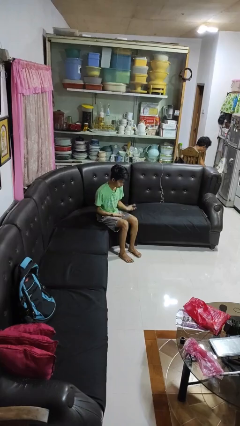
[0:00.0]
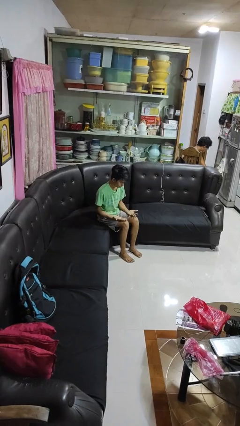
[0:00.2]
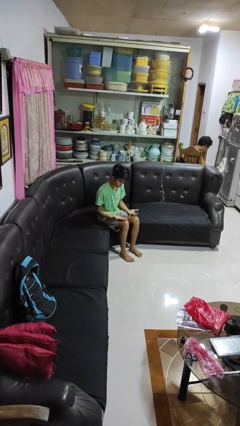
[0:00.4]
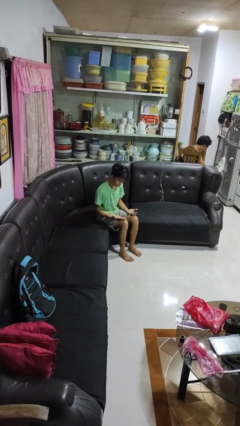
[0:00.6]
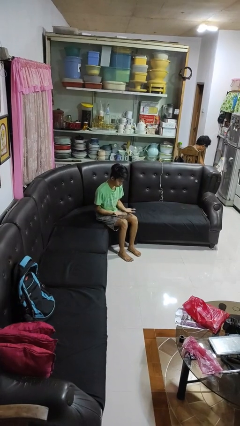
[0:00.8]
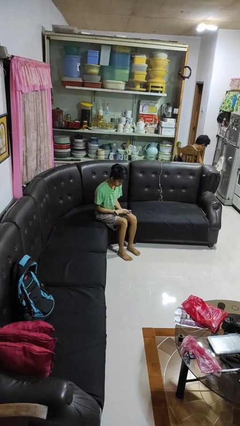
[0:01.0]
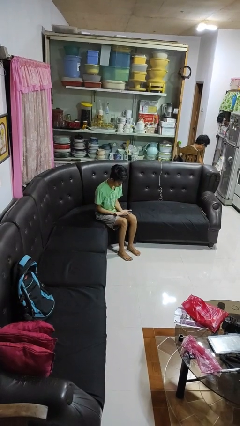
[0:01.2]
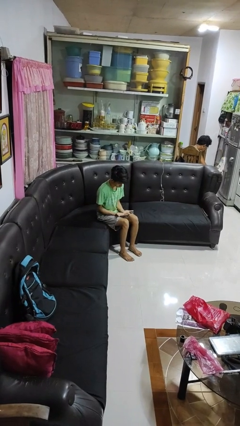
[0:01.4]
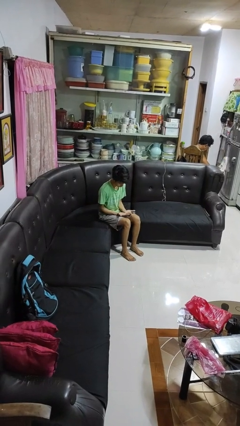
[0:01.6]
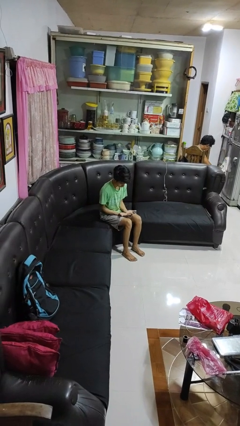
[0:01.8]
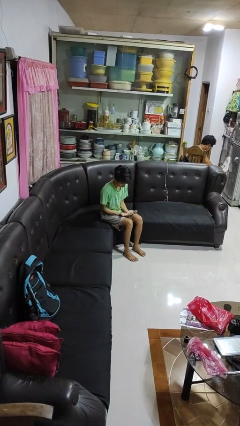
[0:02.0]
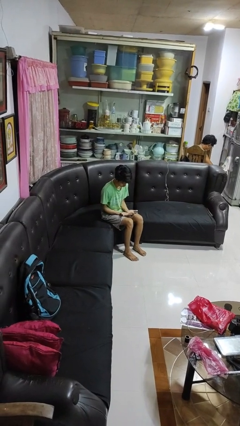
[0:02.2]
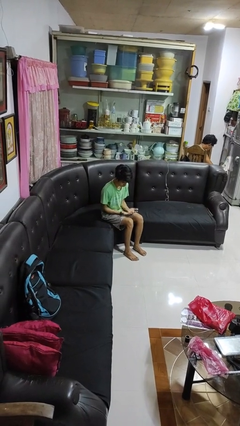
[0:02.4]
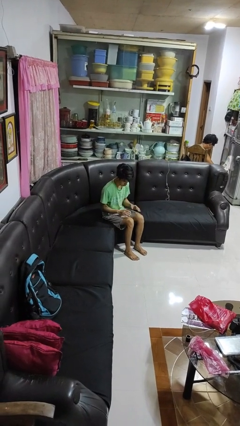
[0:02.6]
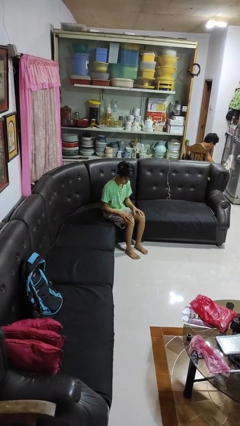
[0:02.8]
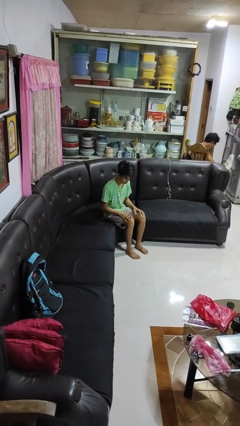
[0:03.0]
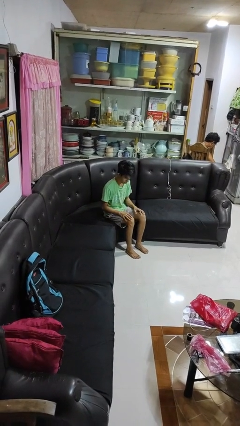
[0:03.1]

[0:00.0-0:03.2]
person looks at hands in lap

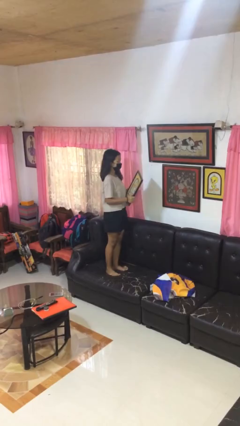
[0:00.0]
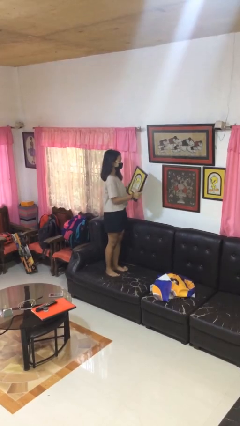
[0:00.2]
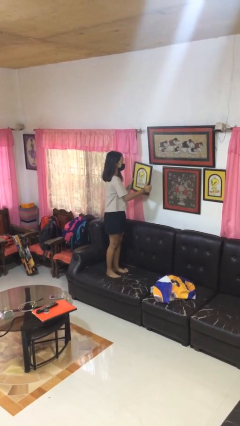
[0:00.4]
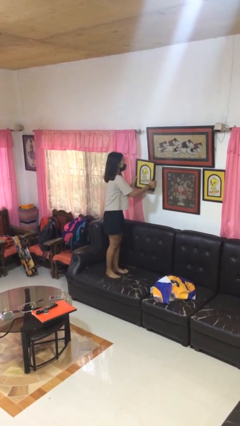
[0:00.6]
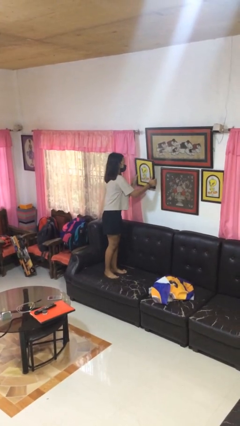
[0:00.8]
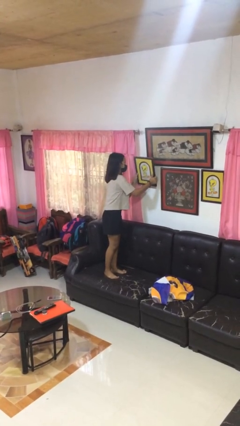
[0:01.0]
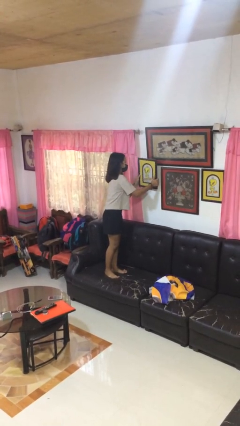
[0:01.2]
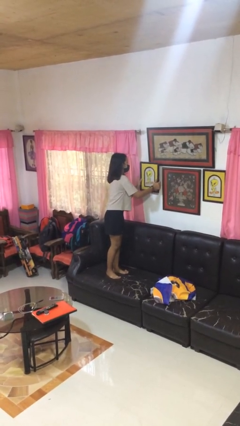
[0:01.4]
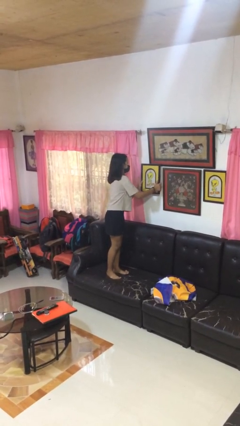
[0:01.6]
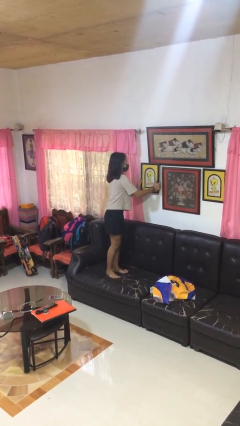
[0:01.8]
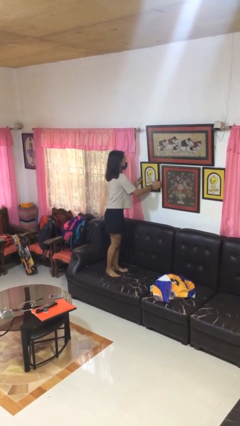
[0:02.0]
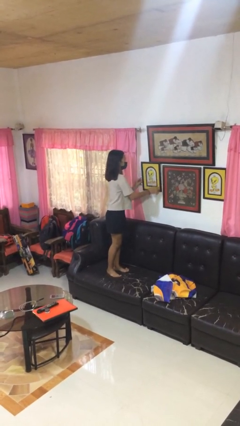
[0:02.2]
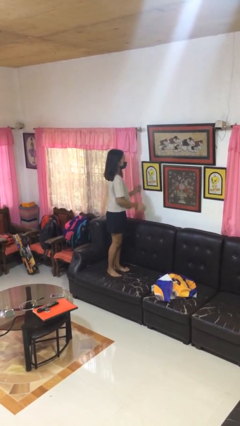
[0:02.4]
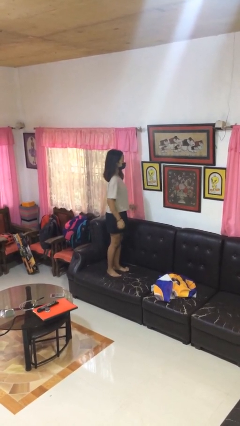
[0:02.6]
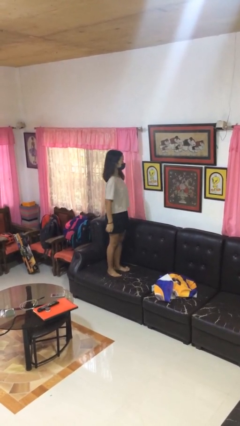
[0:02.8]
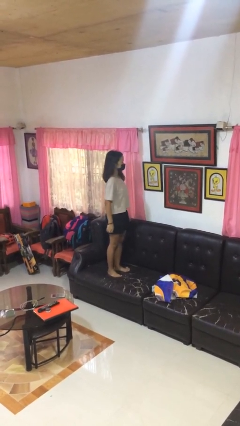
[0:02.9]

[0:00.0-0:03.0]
person puts up picture frame

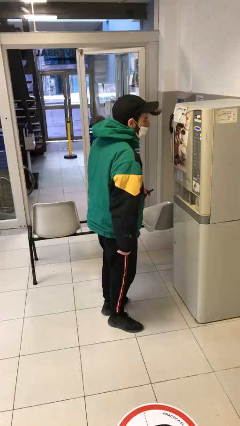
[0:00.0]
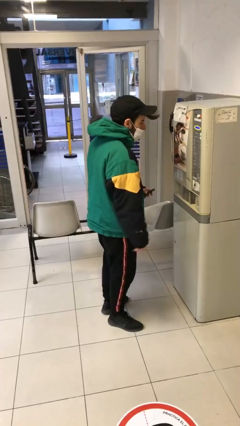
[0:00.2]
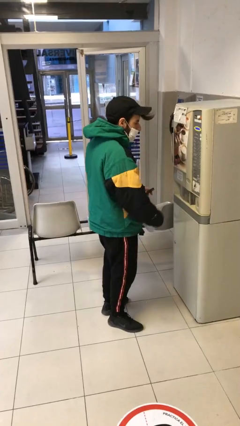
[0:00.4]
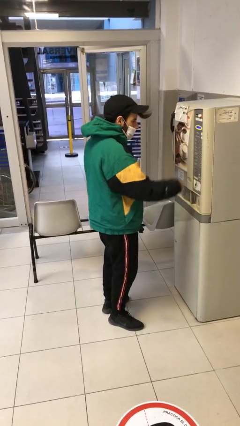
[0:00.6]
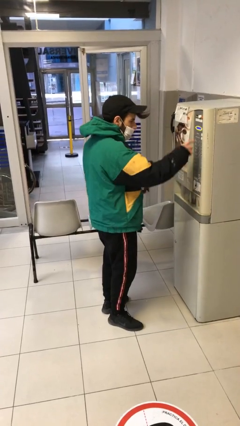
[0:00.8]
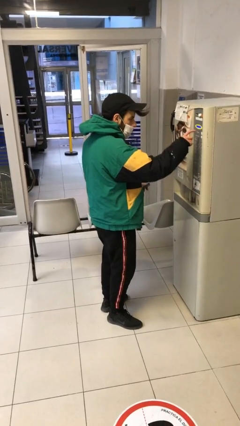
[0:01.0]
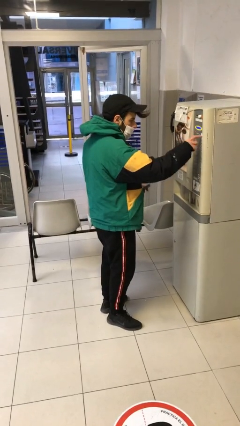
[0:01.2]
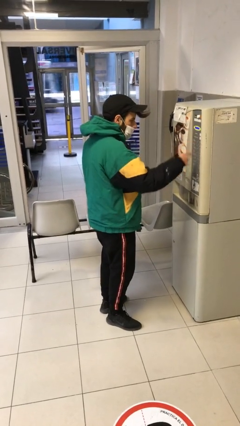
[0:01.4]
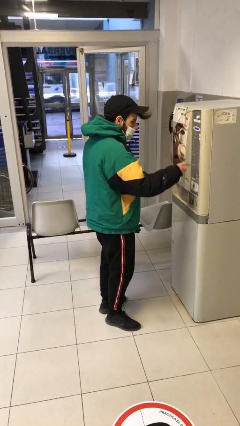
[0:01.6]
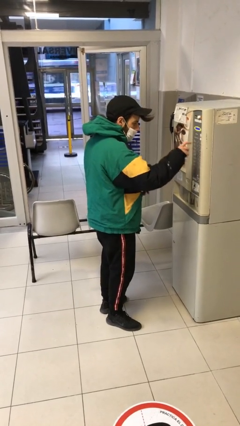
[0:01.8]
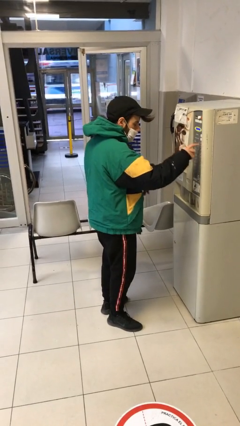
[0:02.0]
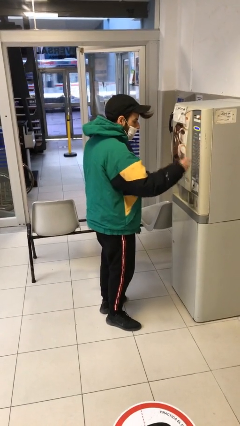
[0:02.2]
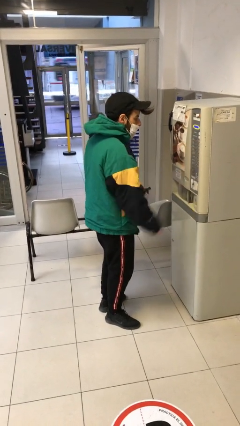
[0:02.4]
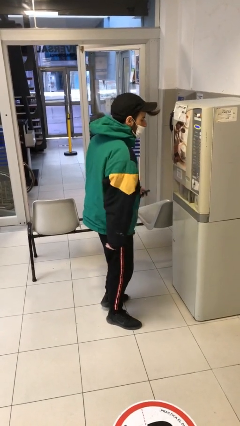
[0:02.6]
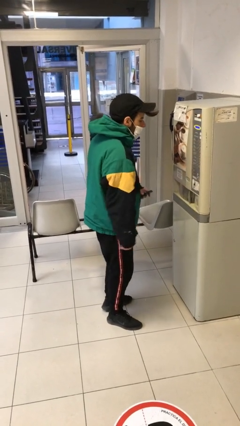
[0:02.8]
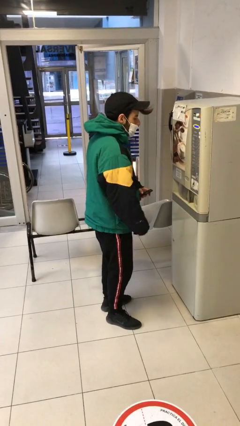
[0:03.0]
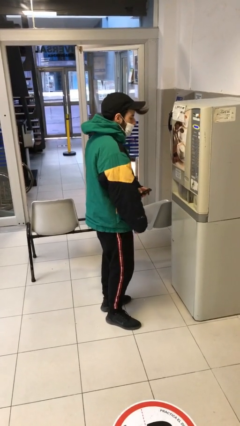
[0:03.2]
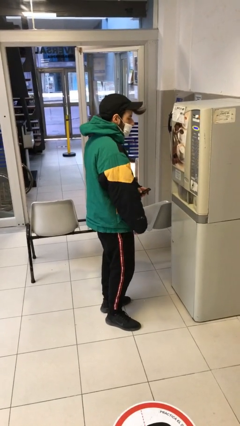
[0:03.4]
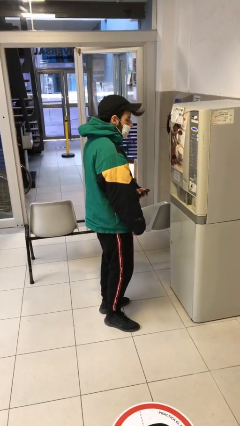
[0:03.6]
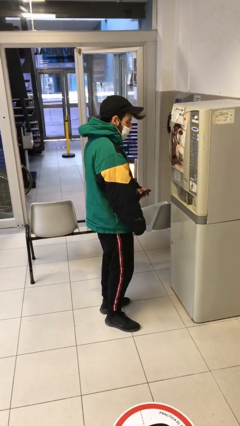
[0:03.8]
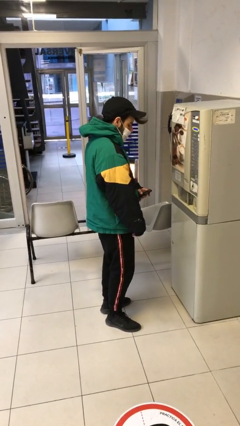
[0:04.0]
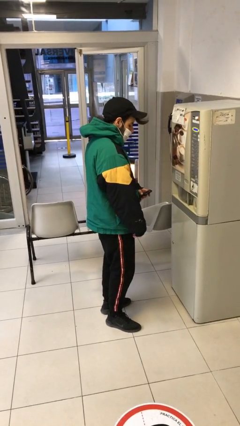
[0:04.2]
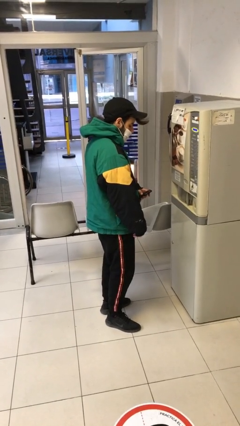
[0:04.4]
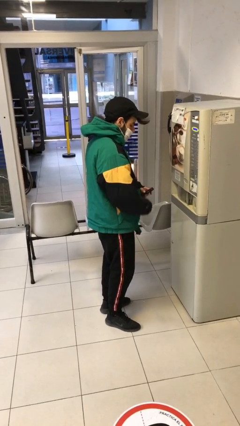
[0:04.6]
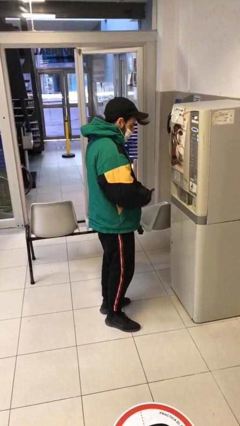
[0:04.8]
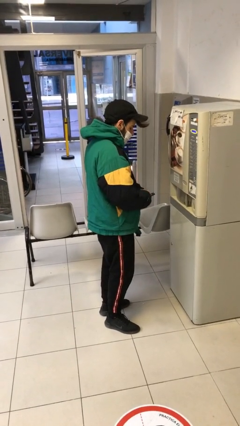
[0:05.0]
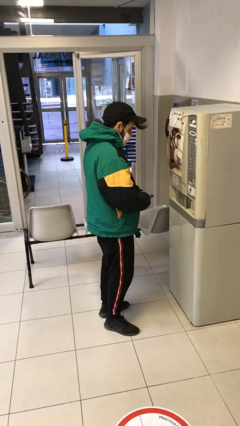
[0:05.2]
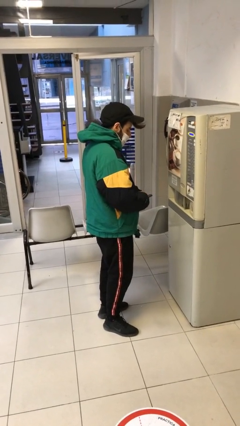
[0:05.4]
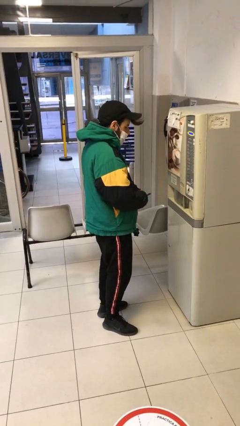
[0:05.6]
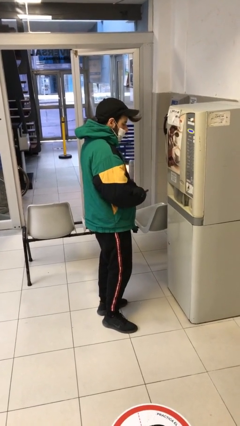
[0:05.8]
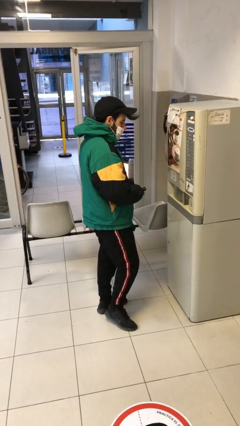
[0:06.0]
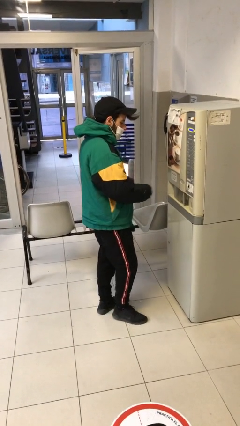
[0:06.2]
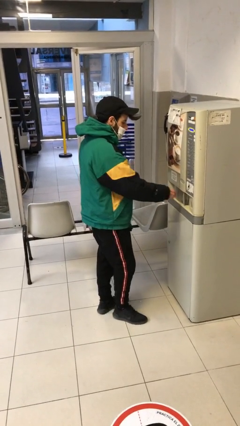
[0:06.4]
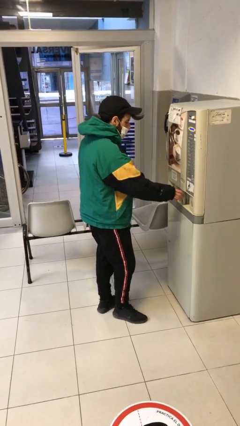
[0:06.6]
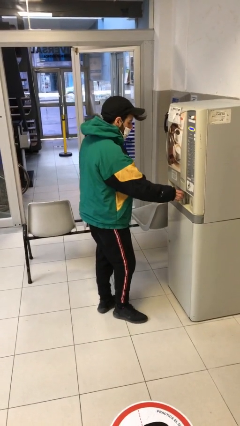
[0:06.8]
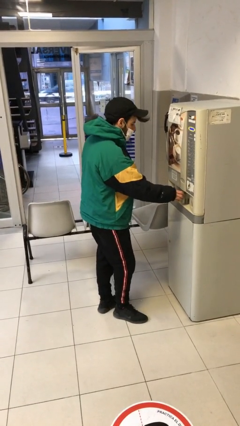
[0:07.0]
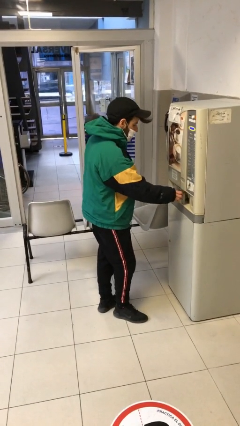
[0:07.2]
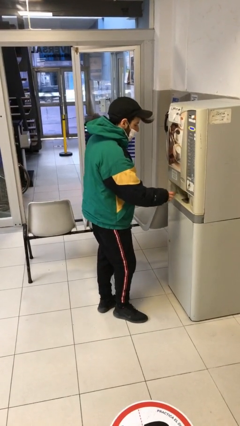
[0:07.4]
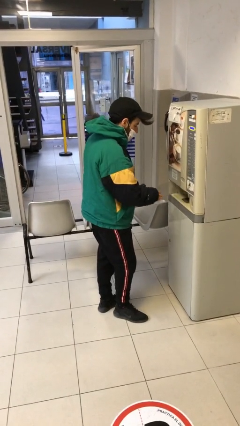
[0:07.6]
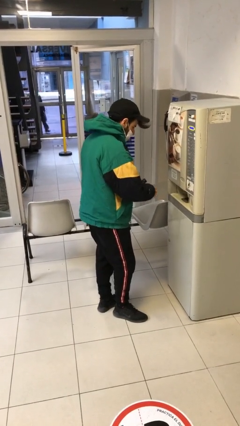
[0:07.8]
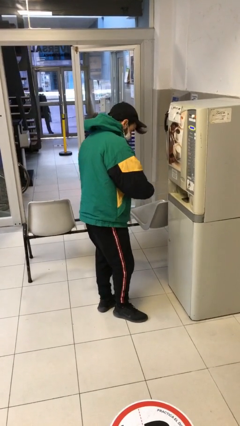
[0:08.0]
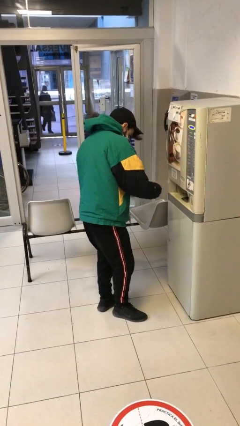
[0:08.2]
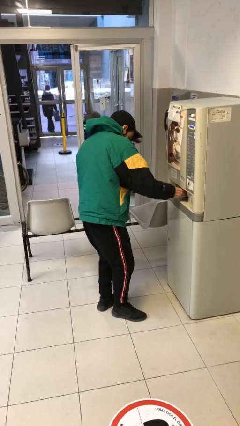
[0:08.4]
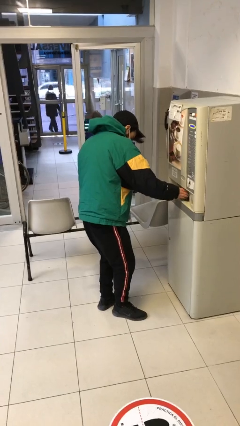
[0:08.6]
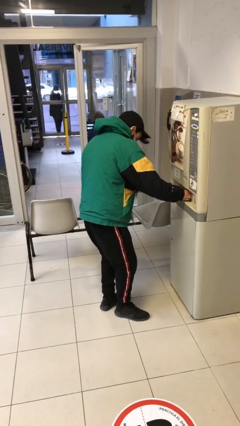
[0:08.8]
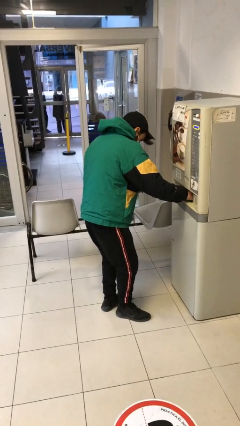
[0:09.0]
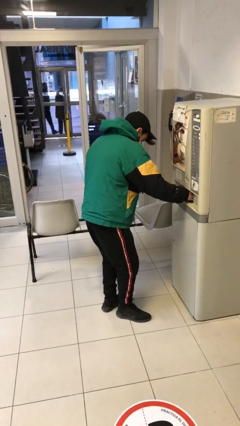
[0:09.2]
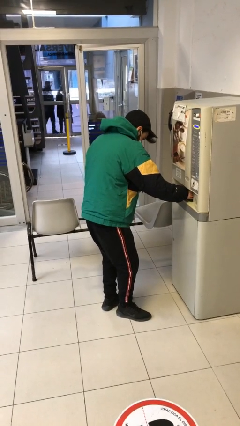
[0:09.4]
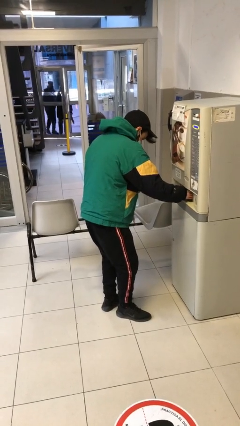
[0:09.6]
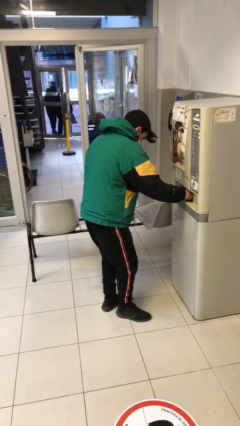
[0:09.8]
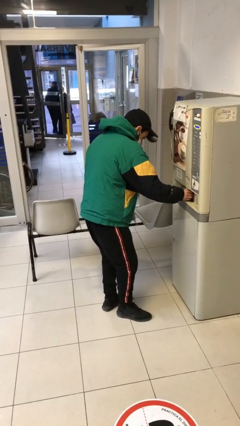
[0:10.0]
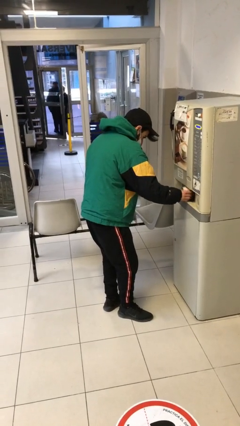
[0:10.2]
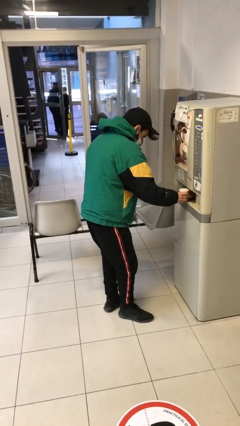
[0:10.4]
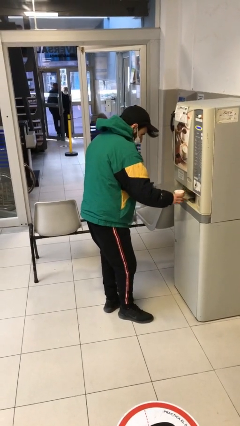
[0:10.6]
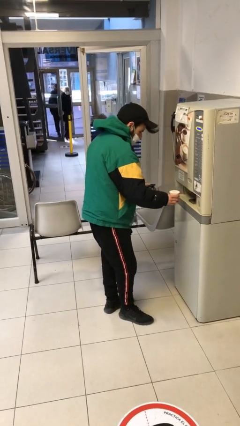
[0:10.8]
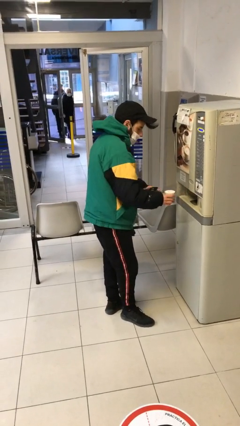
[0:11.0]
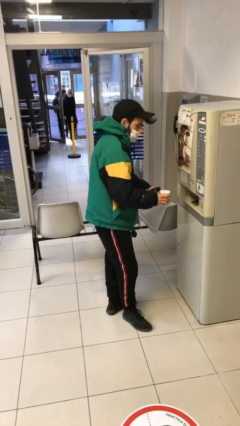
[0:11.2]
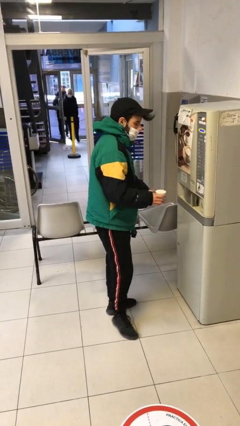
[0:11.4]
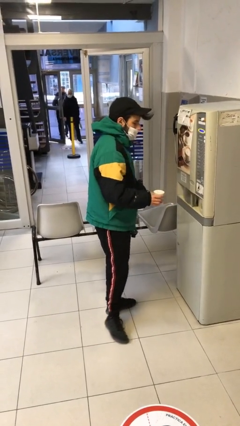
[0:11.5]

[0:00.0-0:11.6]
person purchases from machine

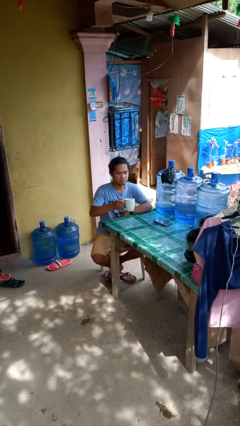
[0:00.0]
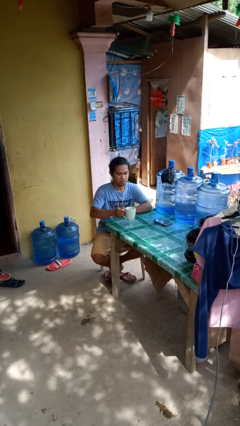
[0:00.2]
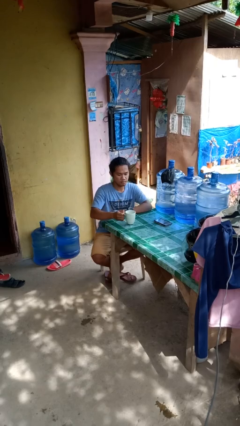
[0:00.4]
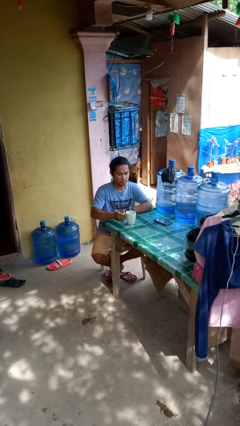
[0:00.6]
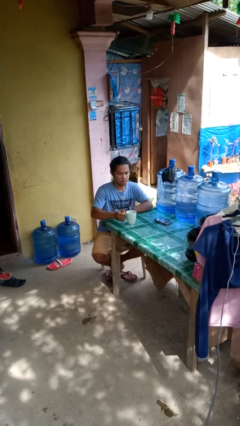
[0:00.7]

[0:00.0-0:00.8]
person puts down object on table
